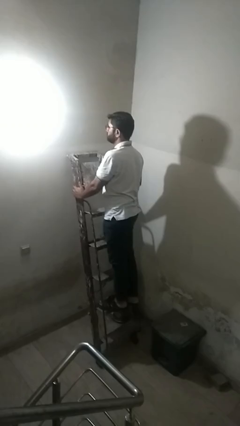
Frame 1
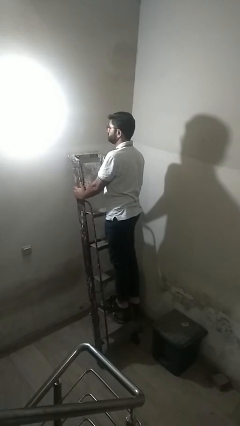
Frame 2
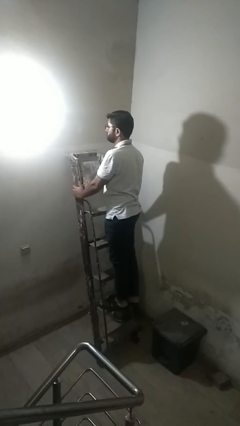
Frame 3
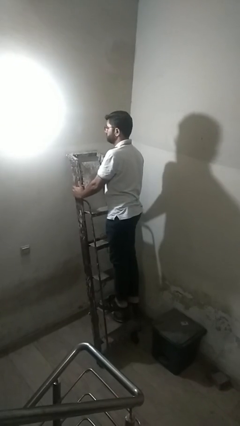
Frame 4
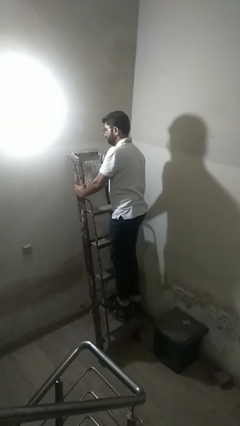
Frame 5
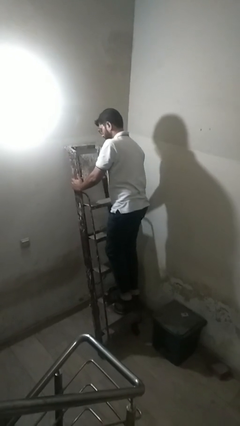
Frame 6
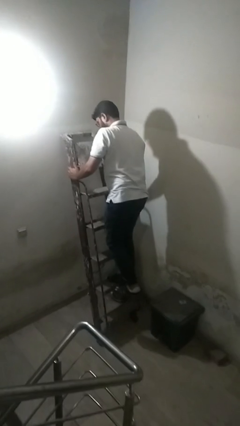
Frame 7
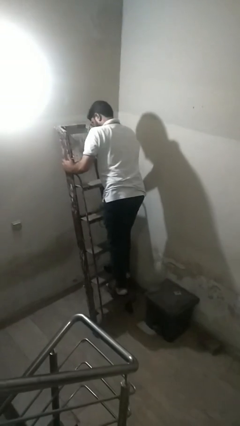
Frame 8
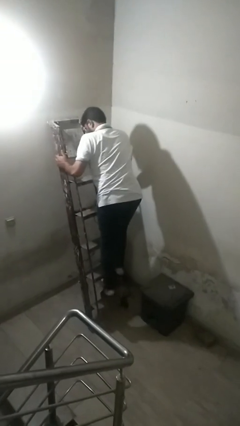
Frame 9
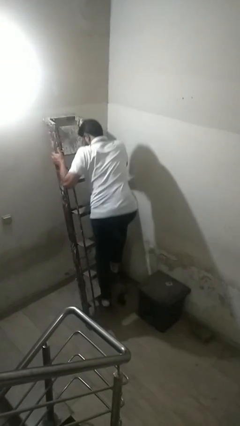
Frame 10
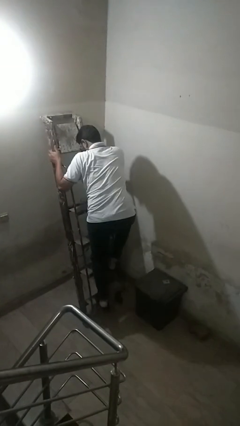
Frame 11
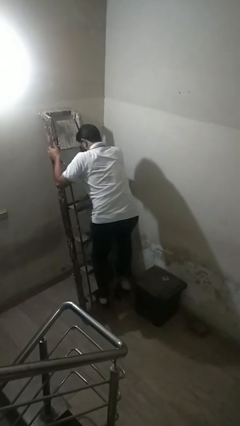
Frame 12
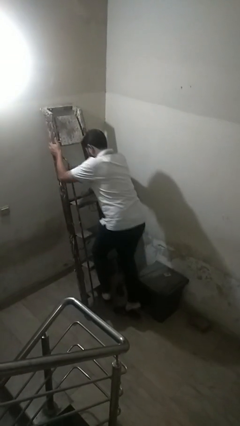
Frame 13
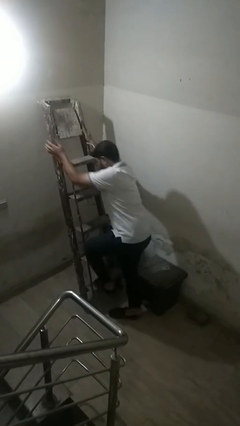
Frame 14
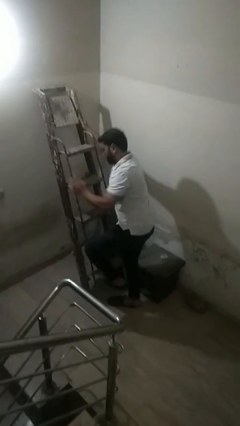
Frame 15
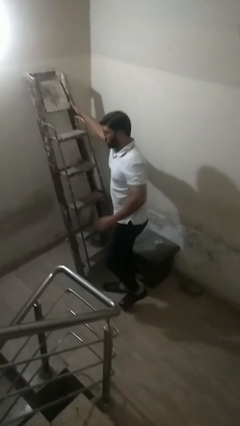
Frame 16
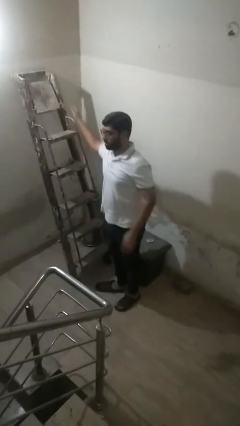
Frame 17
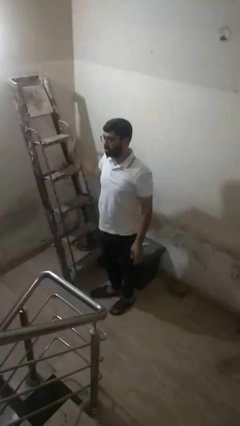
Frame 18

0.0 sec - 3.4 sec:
person climbs down ladder

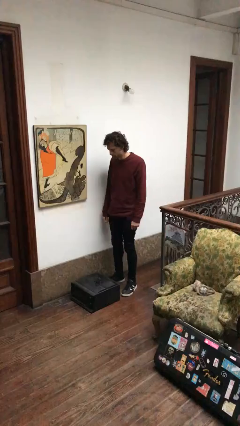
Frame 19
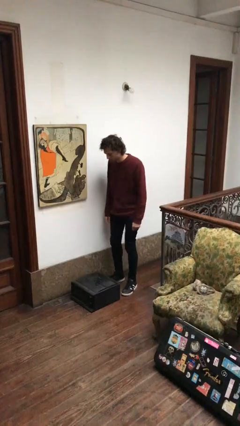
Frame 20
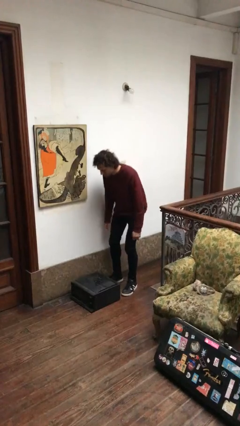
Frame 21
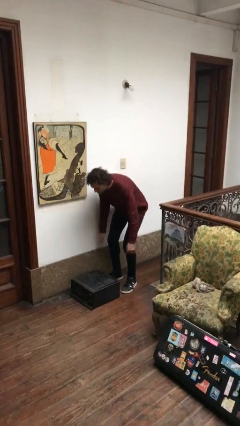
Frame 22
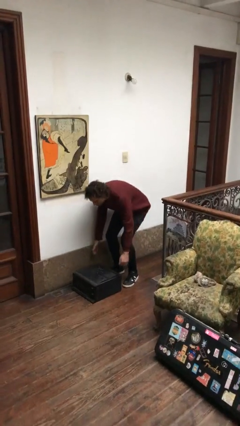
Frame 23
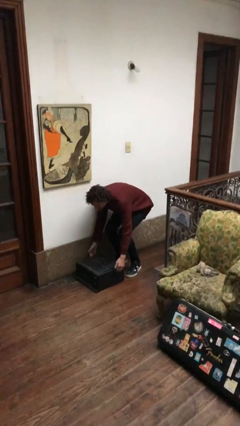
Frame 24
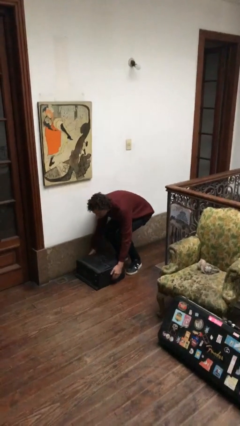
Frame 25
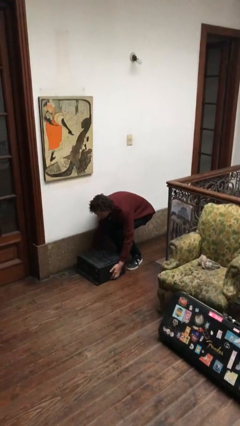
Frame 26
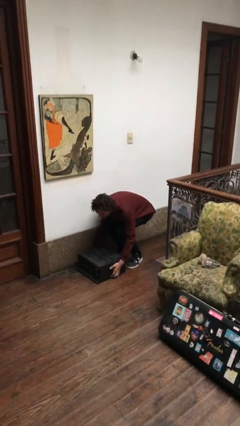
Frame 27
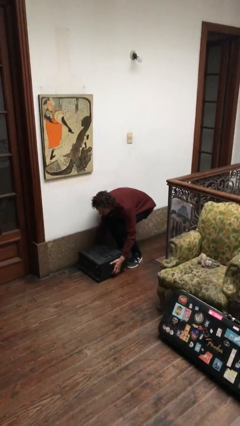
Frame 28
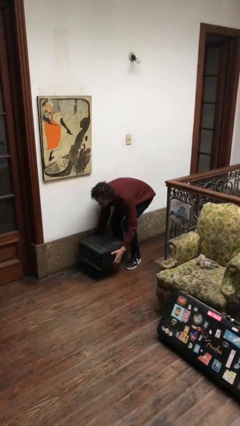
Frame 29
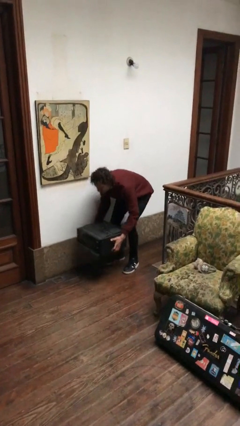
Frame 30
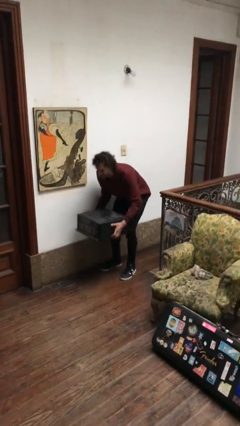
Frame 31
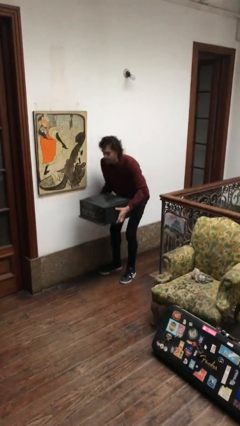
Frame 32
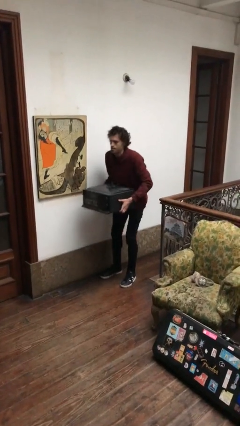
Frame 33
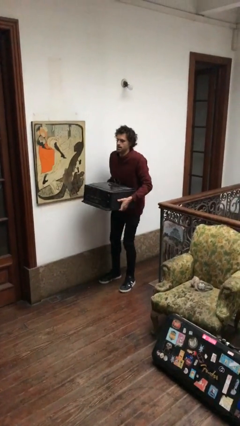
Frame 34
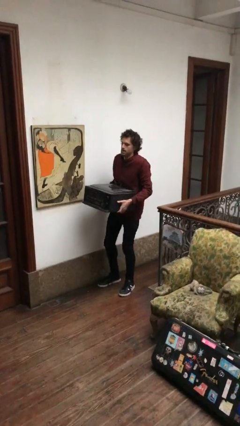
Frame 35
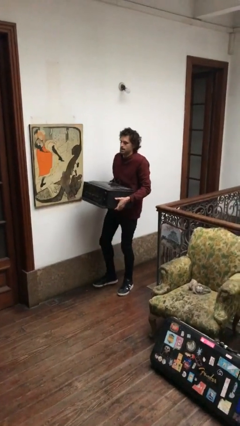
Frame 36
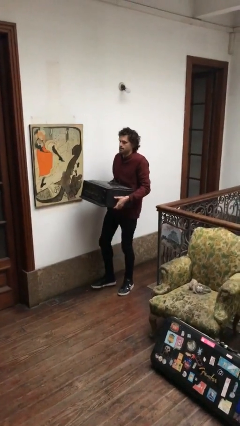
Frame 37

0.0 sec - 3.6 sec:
person picks up object from floor

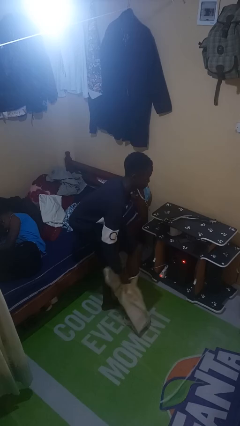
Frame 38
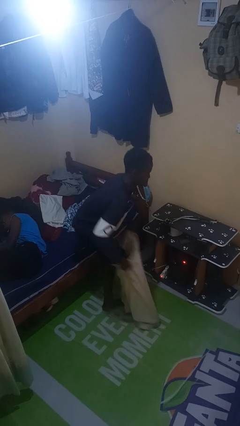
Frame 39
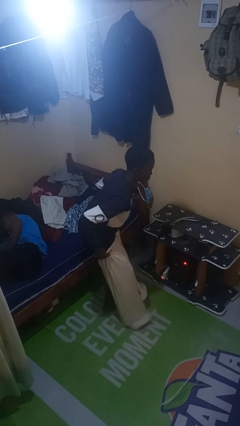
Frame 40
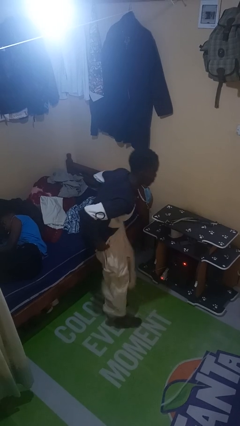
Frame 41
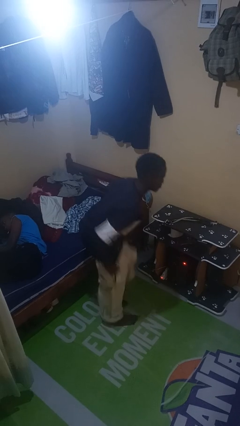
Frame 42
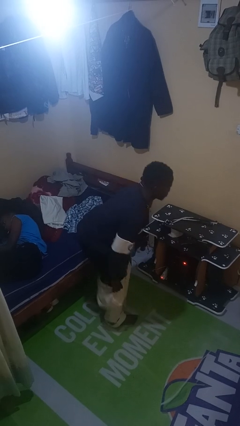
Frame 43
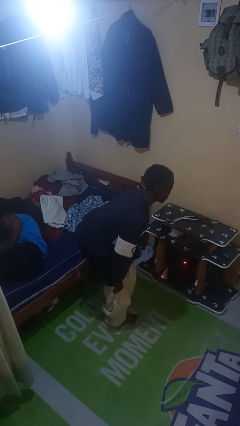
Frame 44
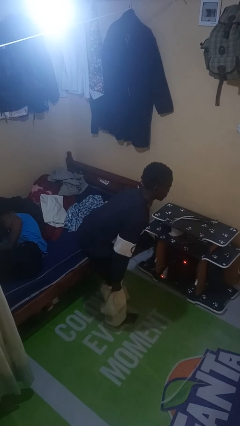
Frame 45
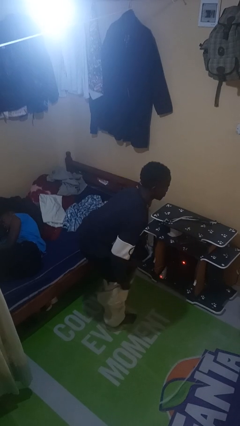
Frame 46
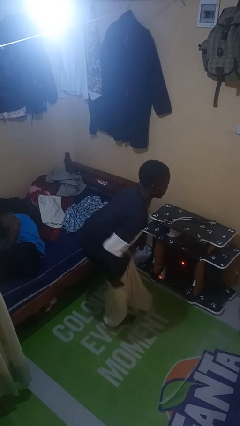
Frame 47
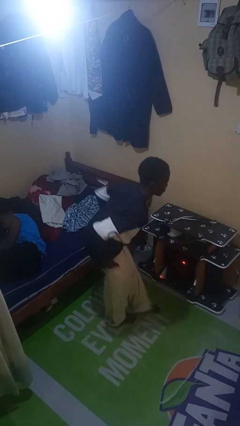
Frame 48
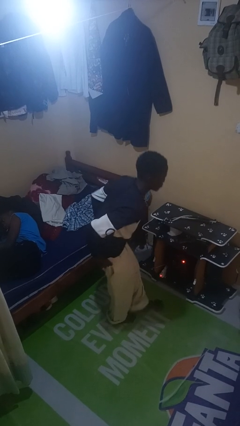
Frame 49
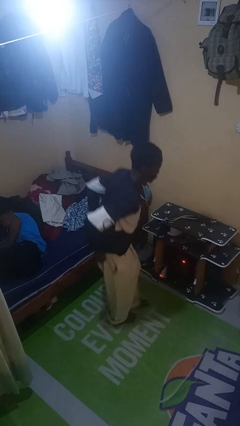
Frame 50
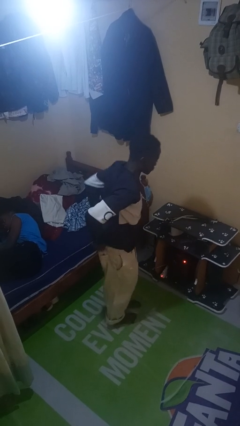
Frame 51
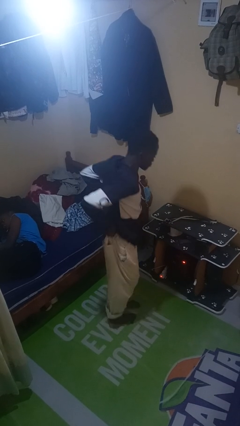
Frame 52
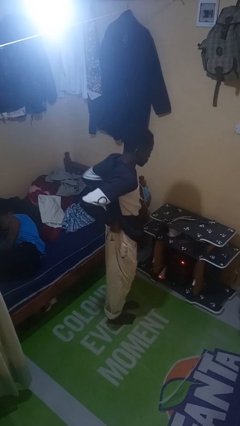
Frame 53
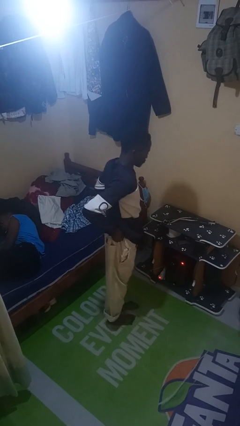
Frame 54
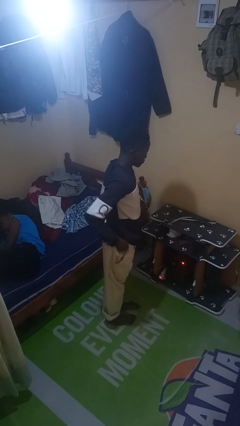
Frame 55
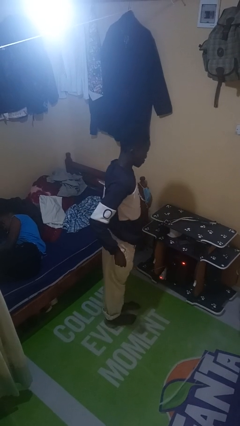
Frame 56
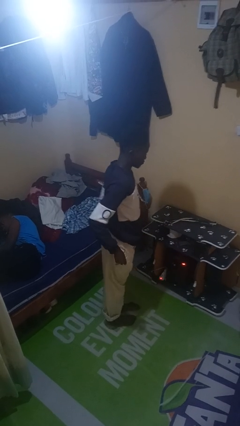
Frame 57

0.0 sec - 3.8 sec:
person puts on pants

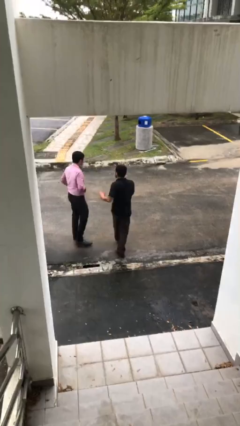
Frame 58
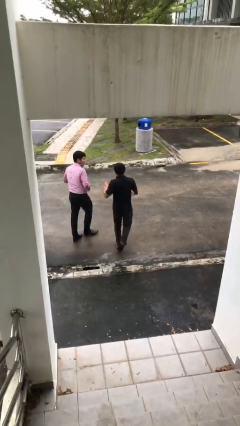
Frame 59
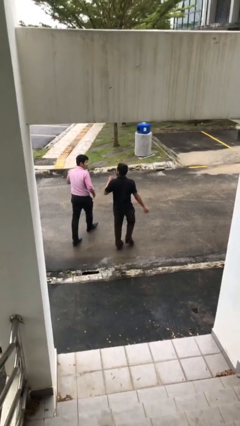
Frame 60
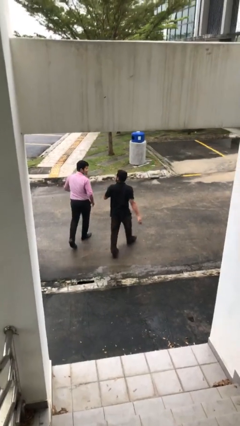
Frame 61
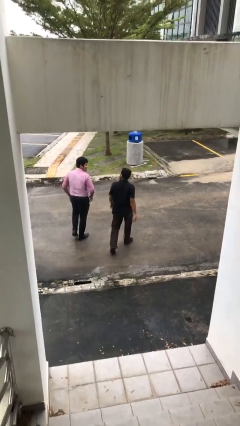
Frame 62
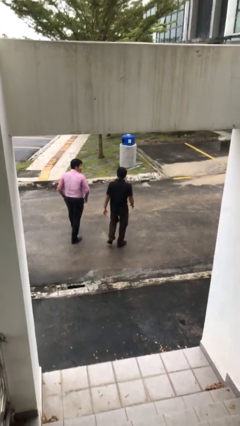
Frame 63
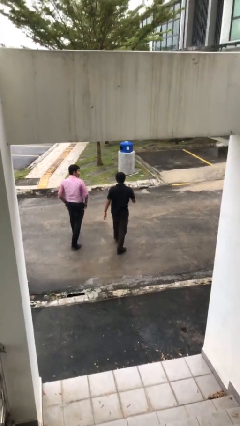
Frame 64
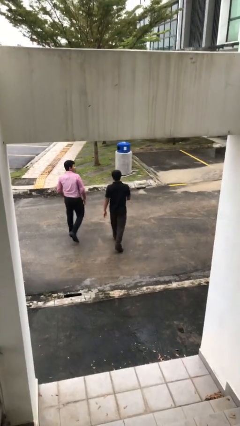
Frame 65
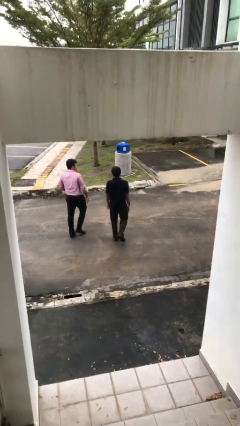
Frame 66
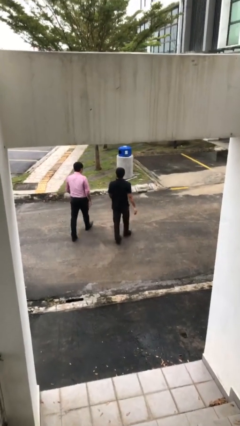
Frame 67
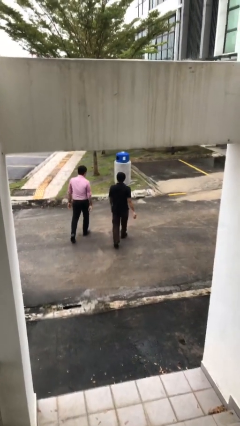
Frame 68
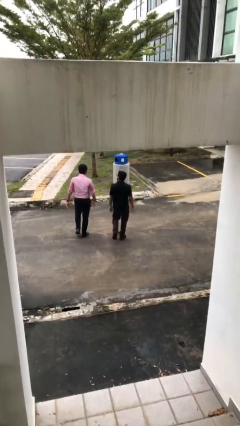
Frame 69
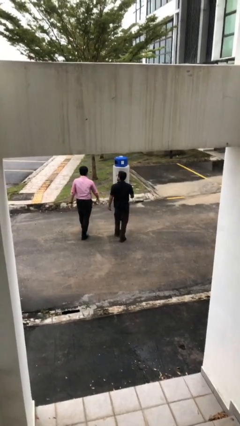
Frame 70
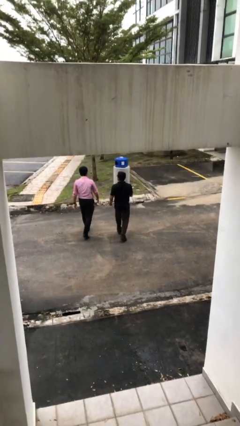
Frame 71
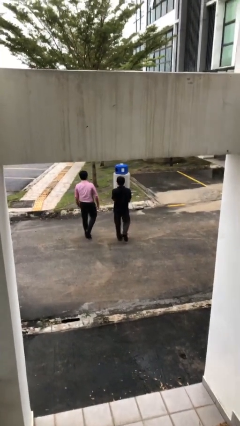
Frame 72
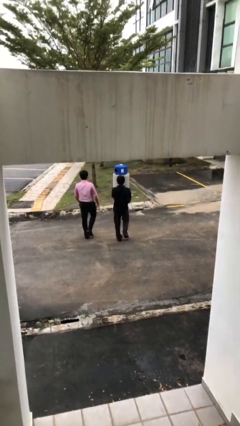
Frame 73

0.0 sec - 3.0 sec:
person talks to person

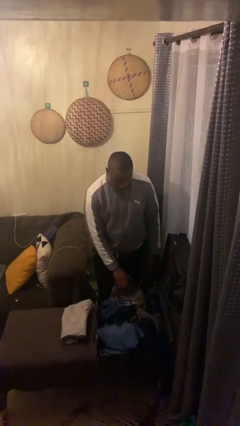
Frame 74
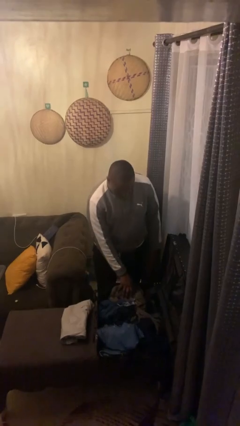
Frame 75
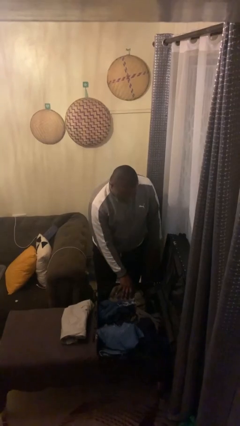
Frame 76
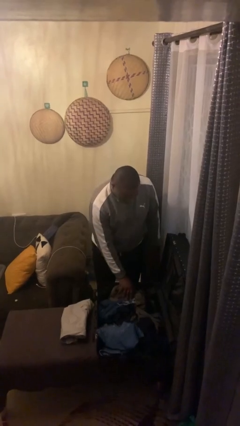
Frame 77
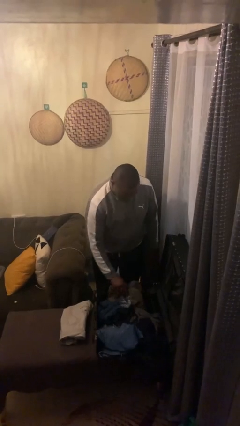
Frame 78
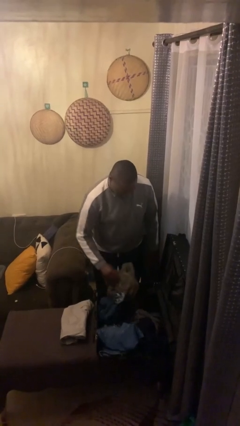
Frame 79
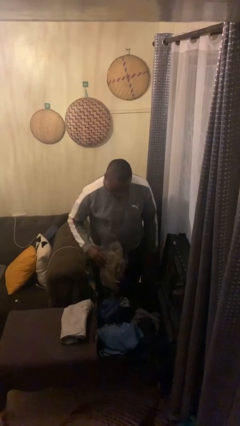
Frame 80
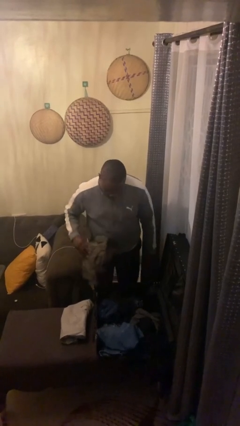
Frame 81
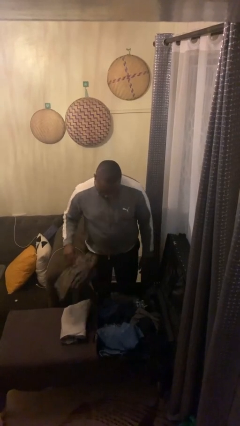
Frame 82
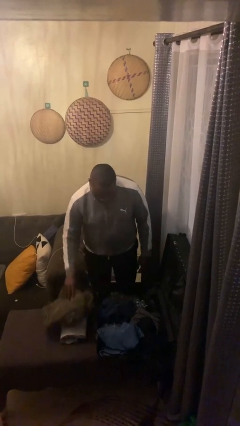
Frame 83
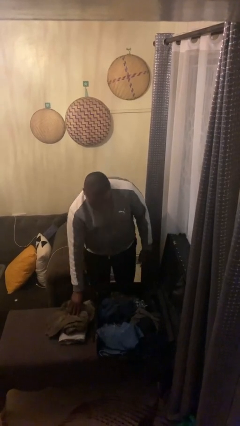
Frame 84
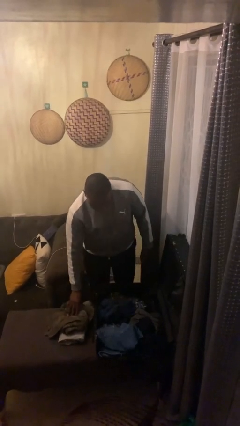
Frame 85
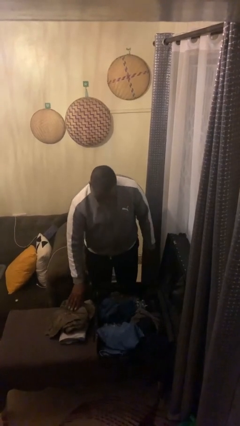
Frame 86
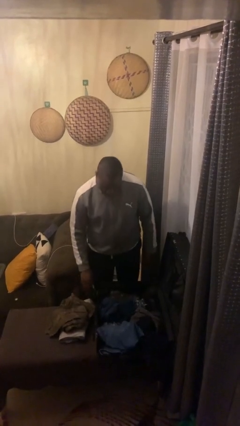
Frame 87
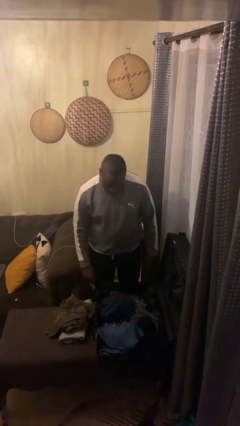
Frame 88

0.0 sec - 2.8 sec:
person unloads clothes from suitcase

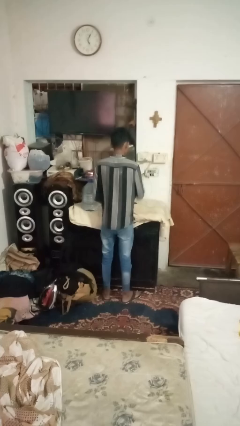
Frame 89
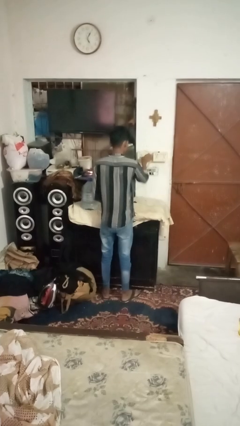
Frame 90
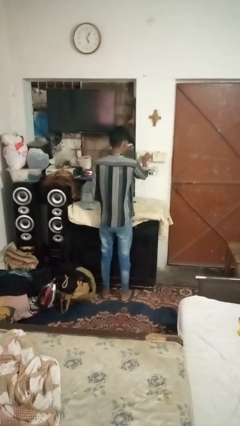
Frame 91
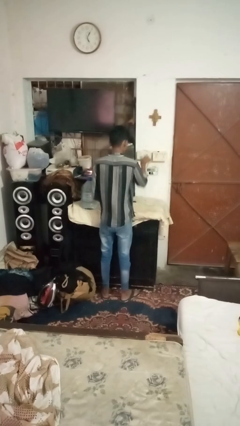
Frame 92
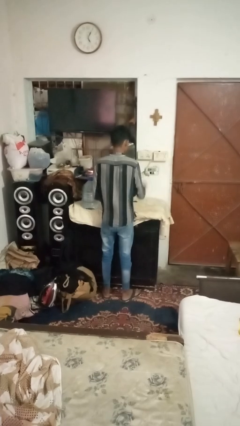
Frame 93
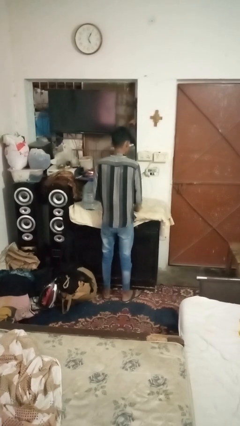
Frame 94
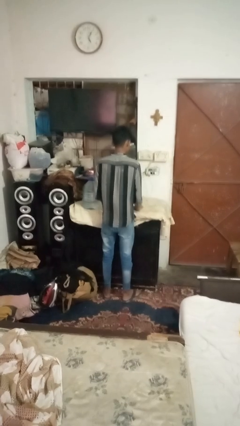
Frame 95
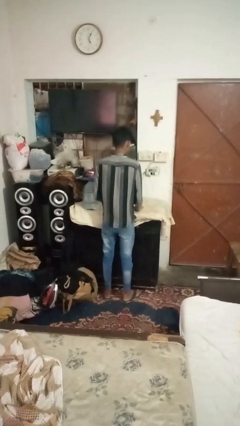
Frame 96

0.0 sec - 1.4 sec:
person unplugs from electrical socket
